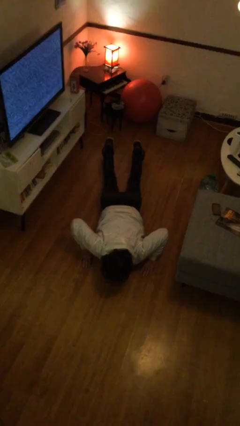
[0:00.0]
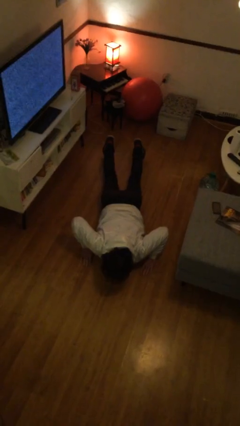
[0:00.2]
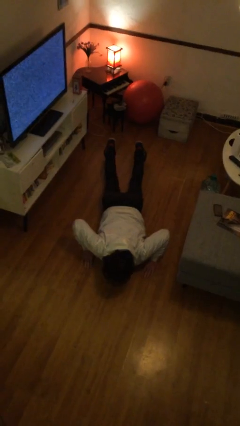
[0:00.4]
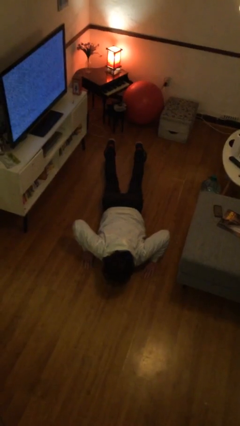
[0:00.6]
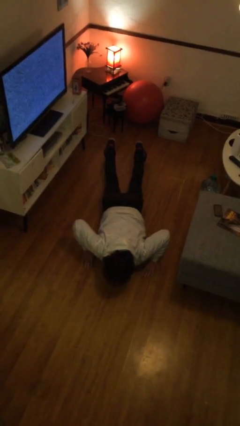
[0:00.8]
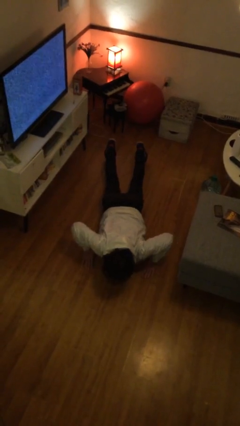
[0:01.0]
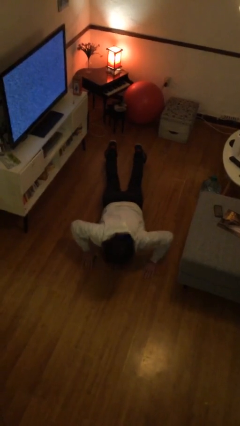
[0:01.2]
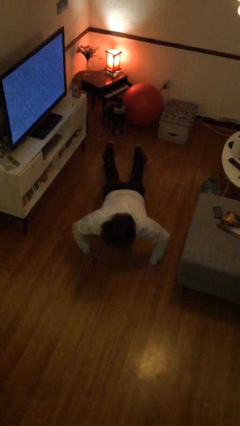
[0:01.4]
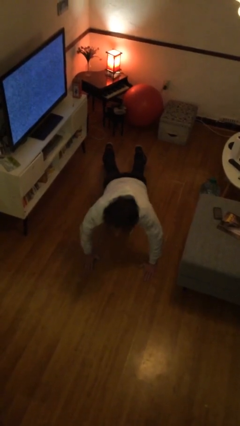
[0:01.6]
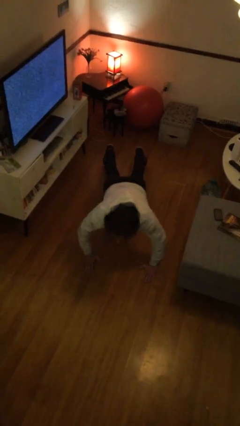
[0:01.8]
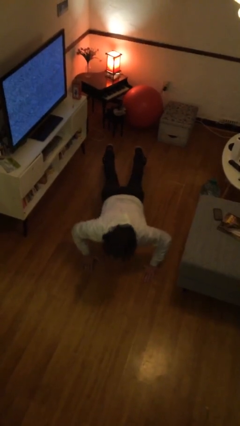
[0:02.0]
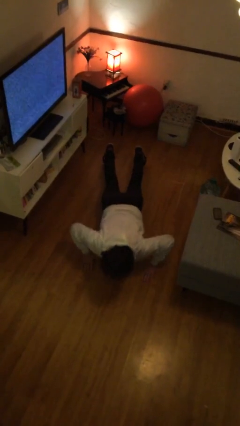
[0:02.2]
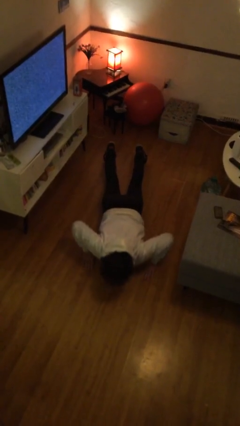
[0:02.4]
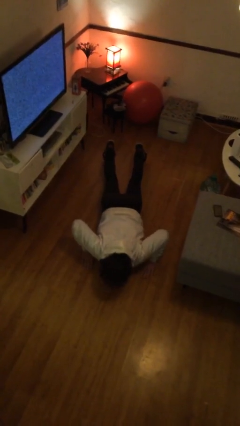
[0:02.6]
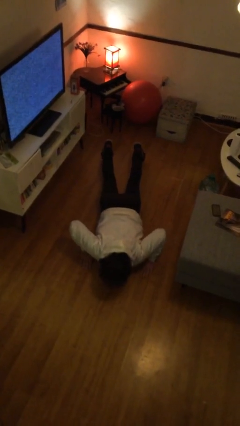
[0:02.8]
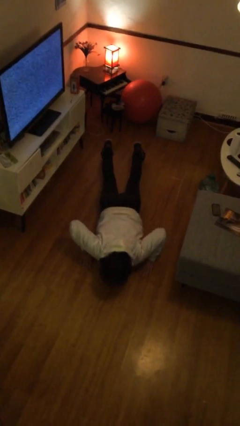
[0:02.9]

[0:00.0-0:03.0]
person exercises with pushup

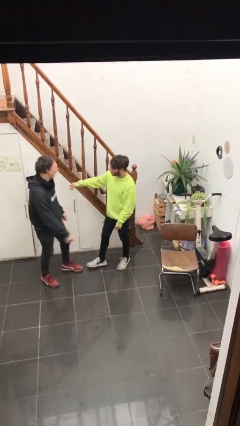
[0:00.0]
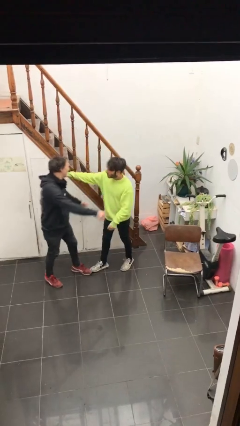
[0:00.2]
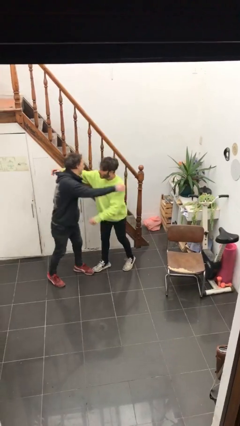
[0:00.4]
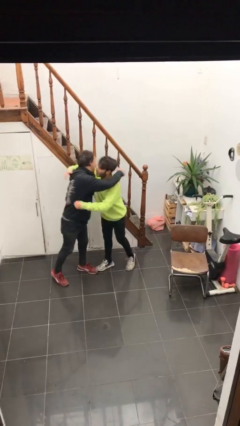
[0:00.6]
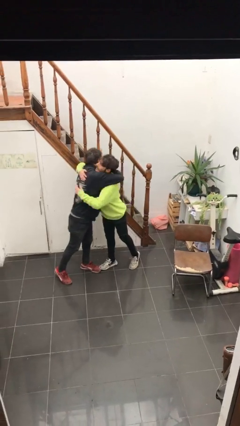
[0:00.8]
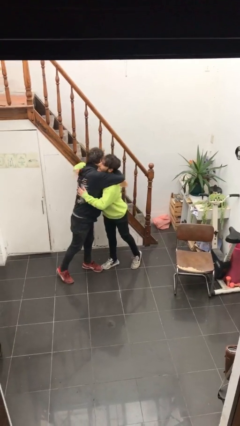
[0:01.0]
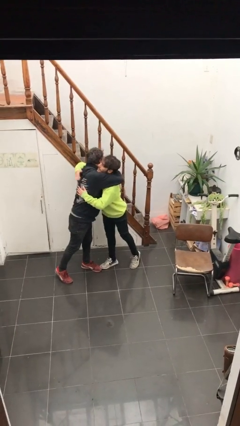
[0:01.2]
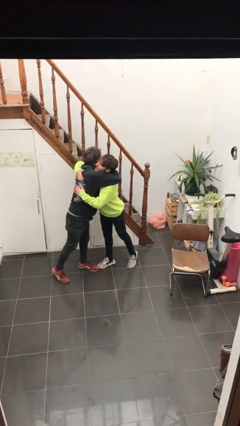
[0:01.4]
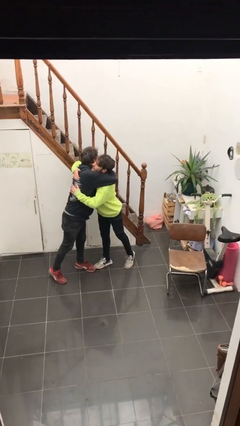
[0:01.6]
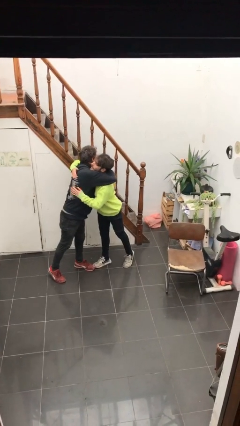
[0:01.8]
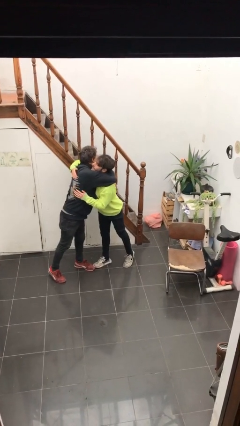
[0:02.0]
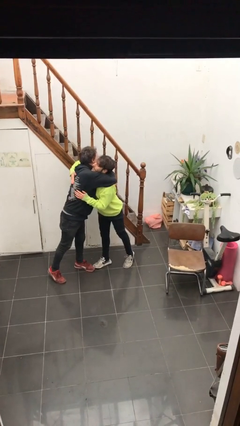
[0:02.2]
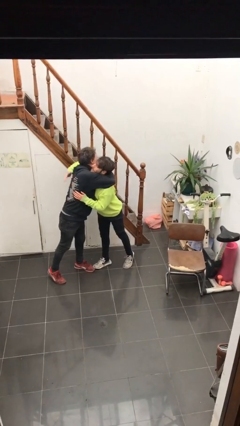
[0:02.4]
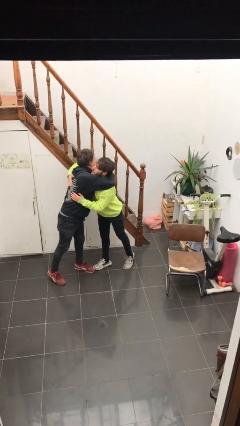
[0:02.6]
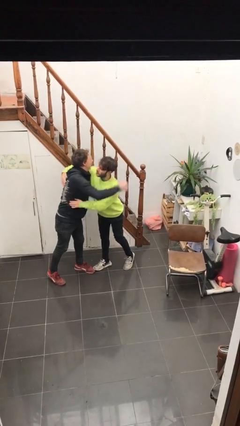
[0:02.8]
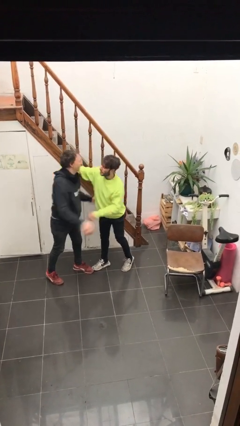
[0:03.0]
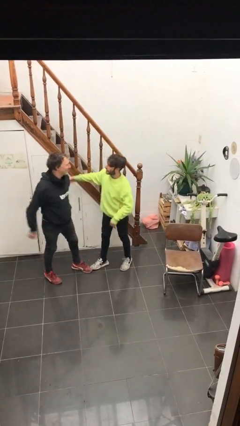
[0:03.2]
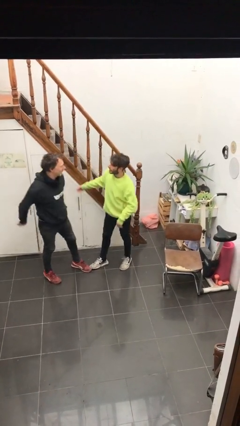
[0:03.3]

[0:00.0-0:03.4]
person embraces person

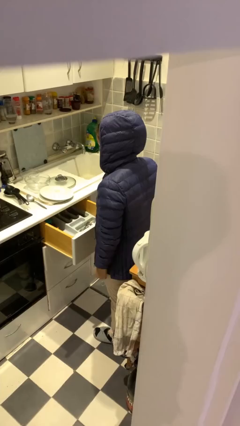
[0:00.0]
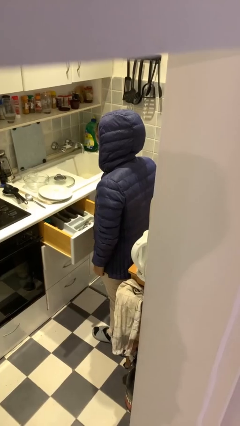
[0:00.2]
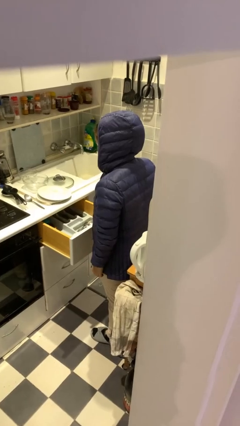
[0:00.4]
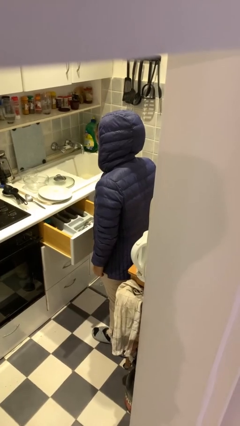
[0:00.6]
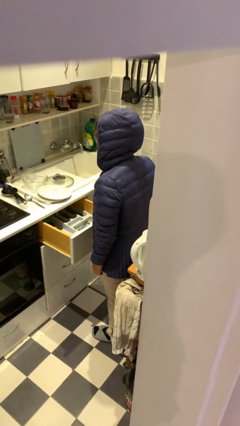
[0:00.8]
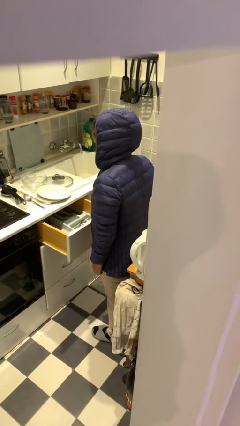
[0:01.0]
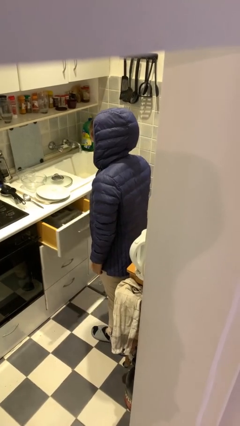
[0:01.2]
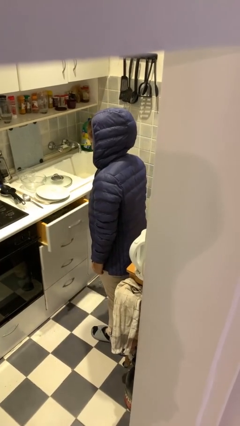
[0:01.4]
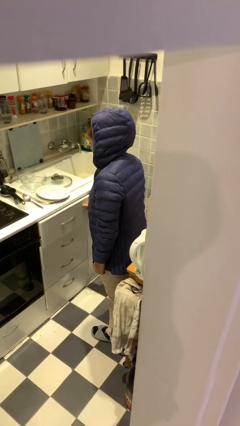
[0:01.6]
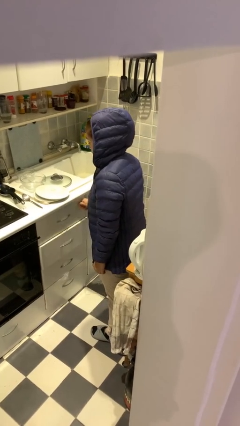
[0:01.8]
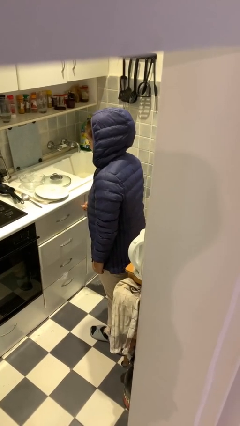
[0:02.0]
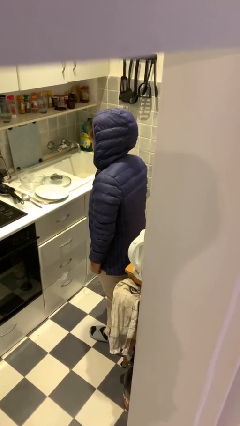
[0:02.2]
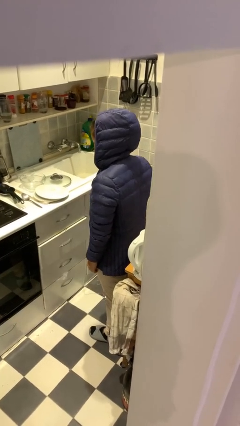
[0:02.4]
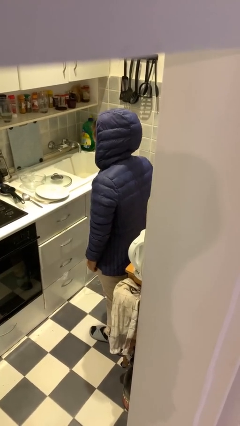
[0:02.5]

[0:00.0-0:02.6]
person closes kitchen drawer

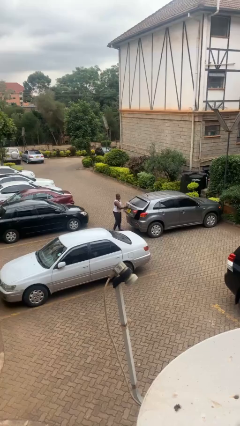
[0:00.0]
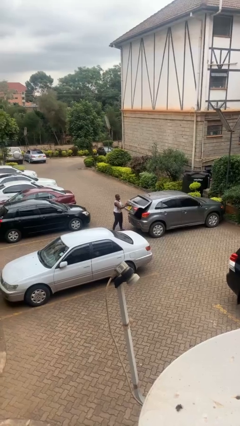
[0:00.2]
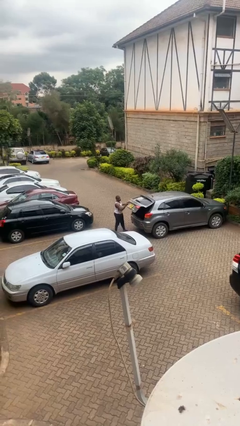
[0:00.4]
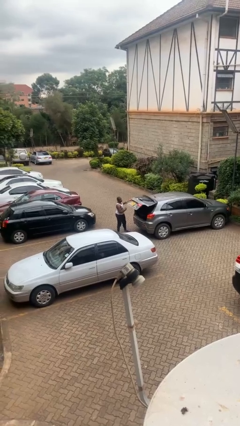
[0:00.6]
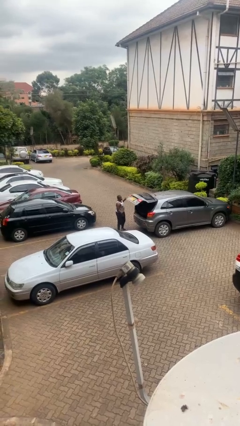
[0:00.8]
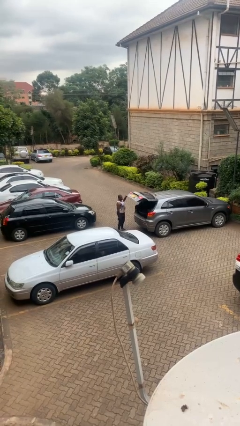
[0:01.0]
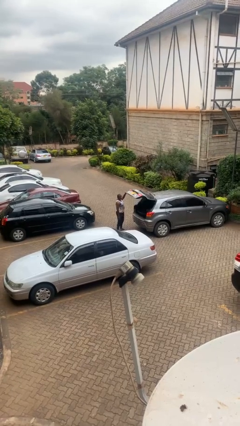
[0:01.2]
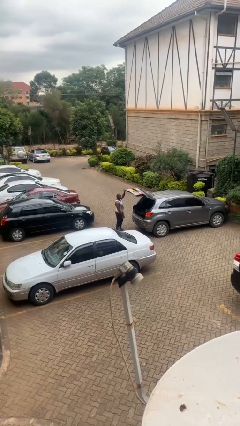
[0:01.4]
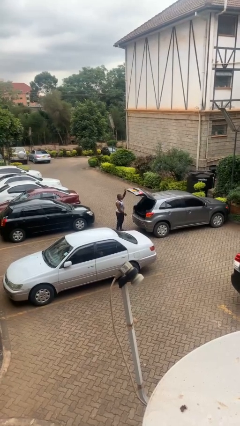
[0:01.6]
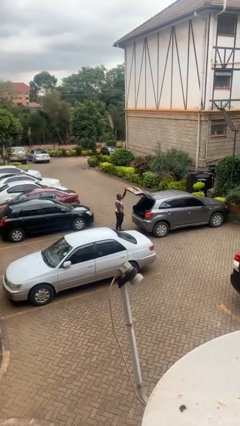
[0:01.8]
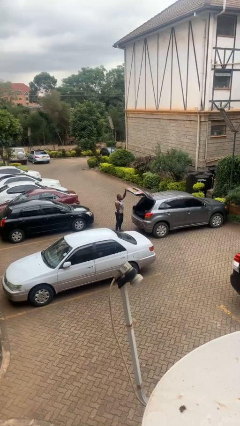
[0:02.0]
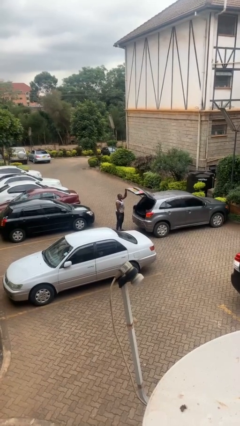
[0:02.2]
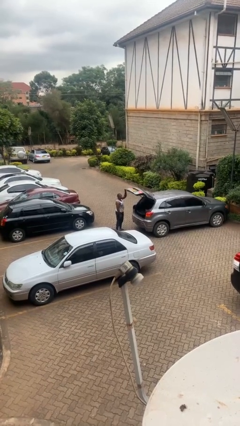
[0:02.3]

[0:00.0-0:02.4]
person opens car trunk

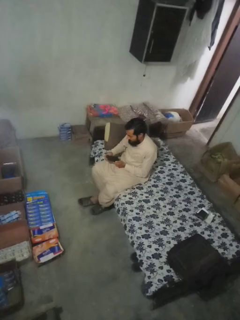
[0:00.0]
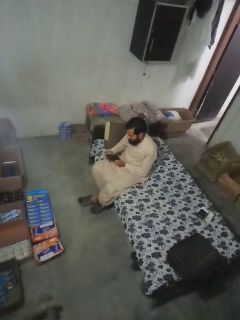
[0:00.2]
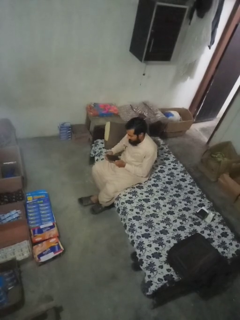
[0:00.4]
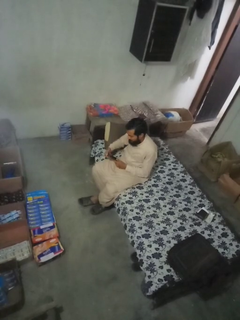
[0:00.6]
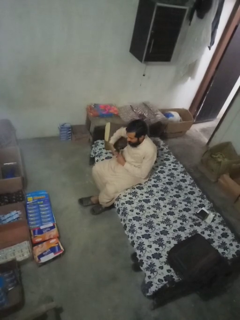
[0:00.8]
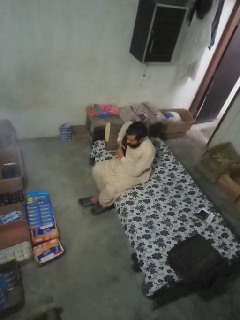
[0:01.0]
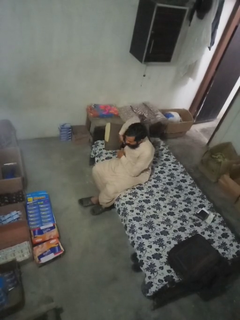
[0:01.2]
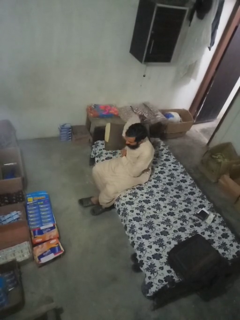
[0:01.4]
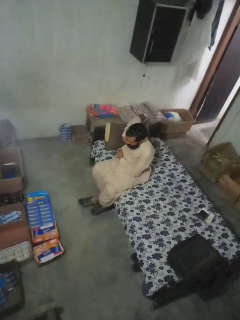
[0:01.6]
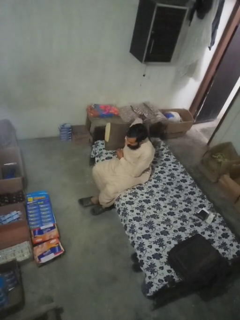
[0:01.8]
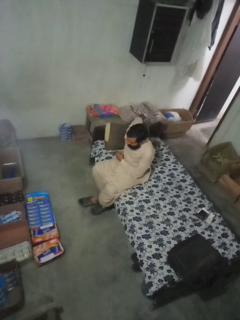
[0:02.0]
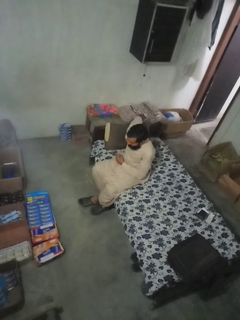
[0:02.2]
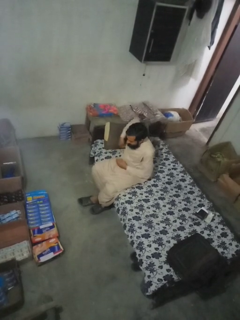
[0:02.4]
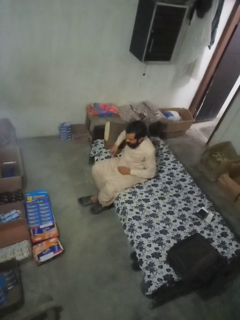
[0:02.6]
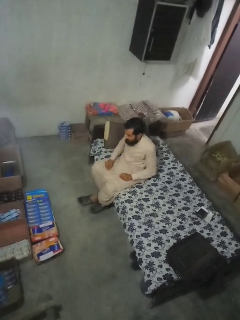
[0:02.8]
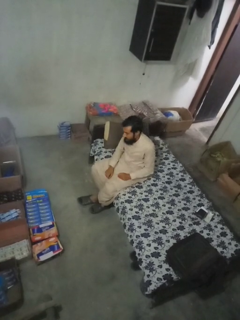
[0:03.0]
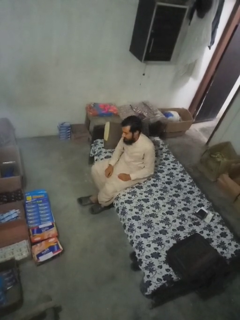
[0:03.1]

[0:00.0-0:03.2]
person puts phone into pocket

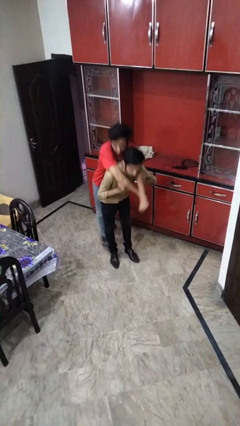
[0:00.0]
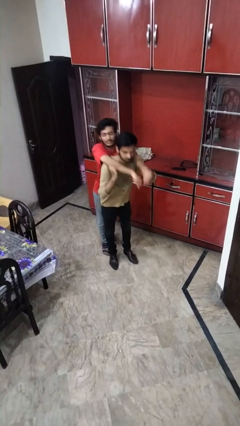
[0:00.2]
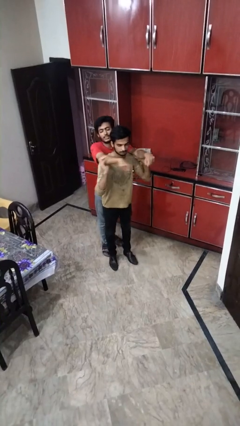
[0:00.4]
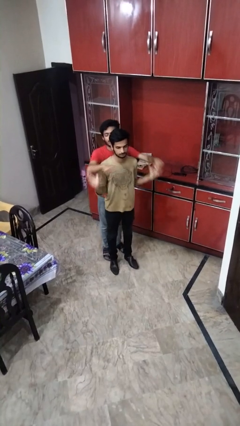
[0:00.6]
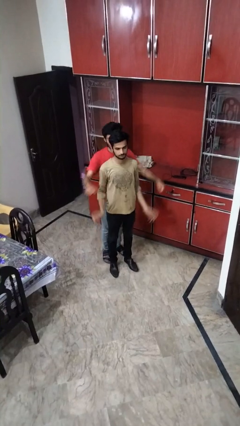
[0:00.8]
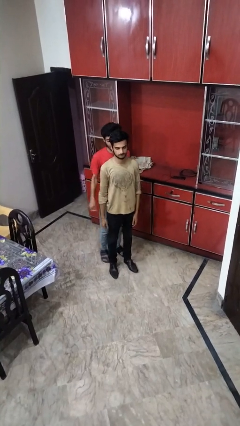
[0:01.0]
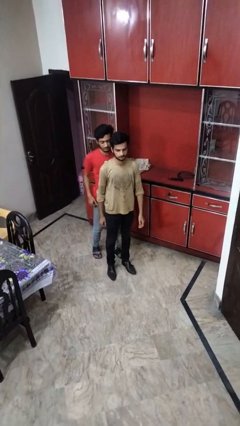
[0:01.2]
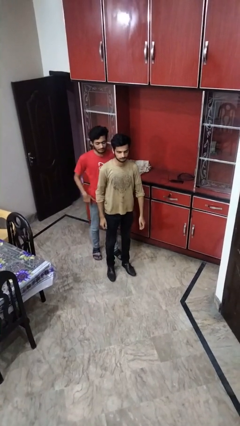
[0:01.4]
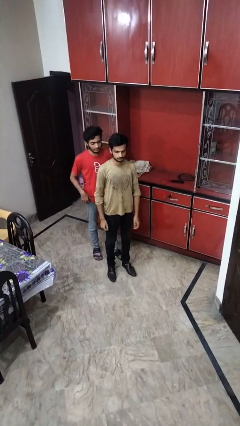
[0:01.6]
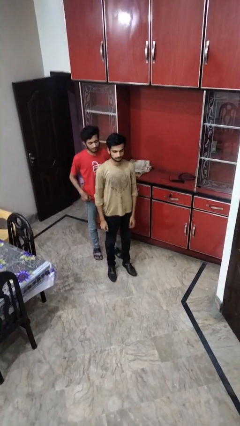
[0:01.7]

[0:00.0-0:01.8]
person puts down person

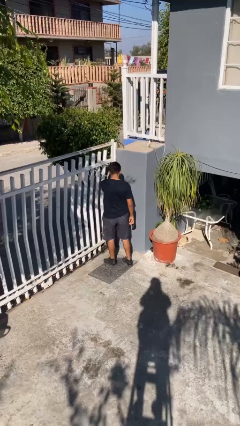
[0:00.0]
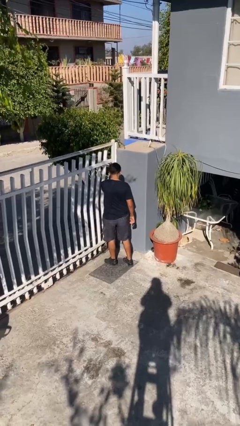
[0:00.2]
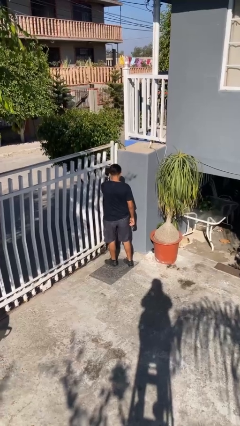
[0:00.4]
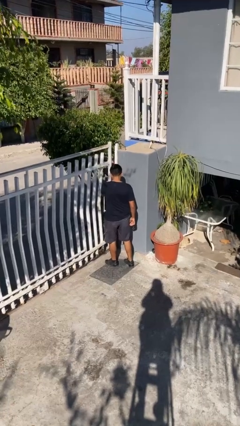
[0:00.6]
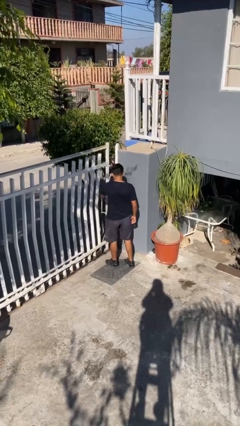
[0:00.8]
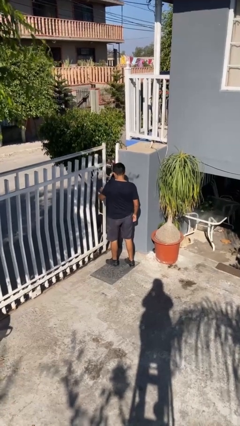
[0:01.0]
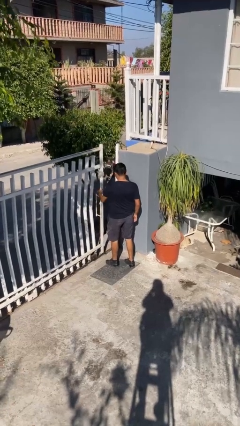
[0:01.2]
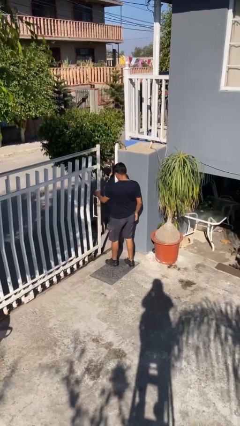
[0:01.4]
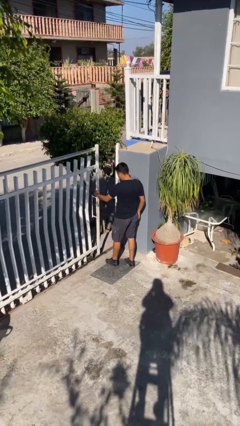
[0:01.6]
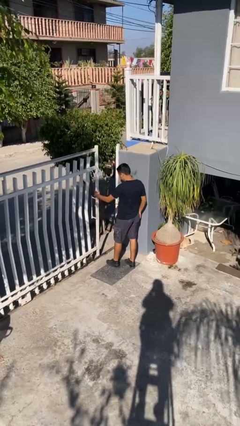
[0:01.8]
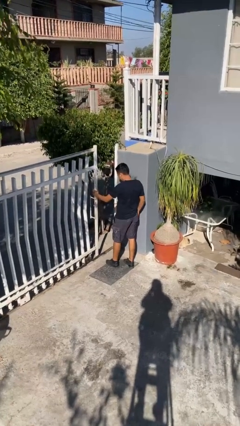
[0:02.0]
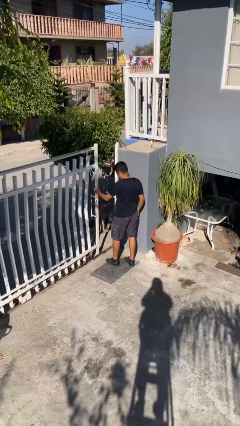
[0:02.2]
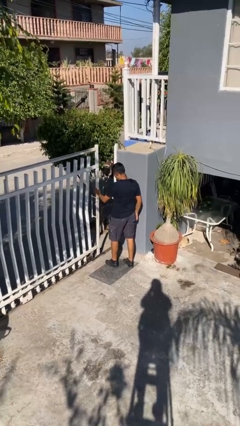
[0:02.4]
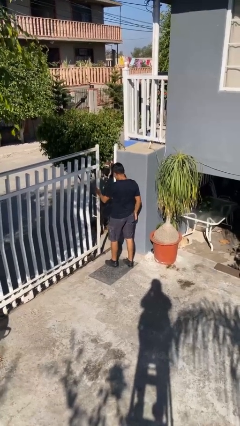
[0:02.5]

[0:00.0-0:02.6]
person opens facility door
